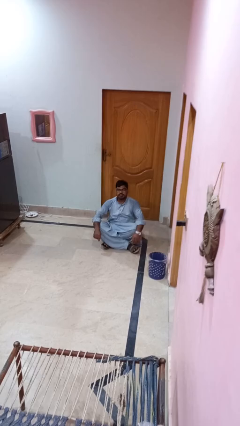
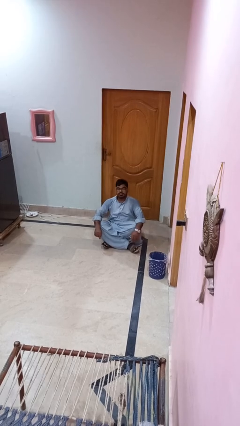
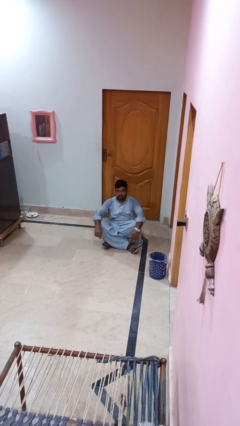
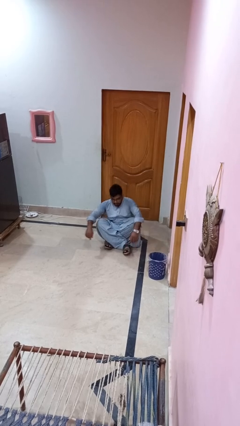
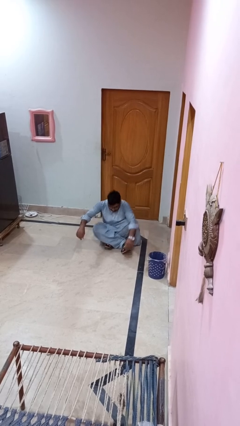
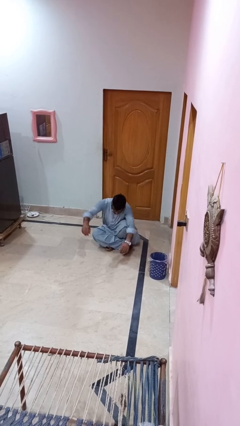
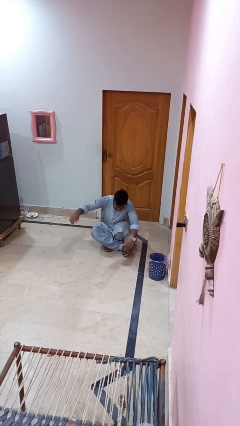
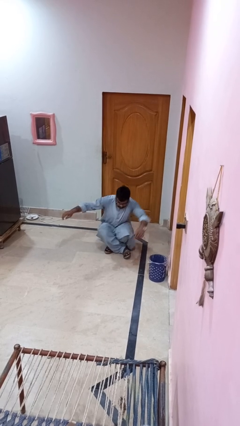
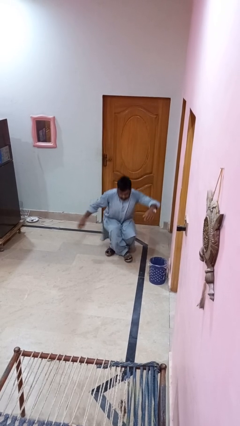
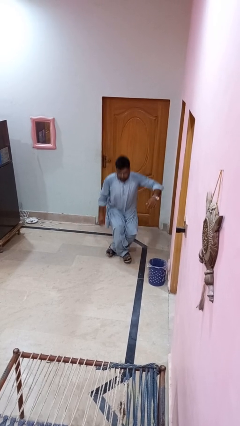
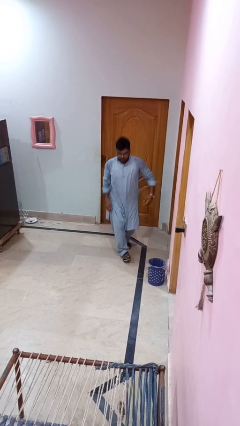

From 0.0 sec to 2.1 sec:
person stands up from floor

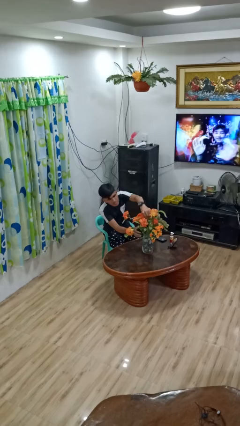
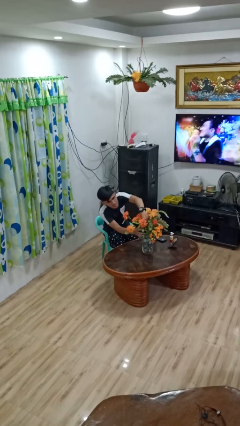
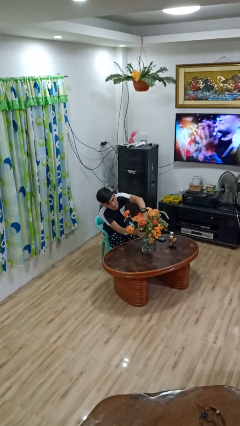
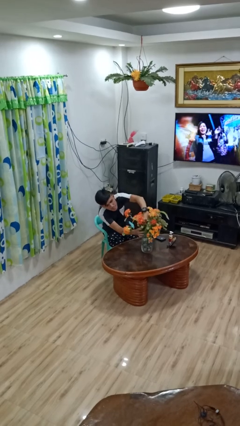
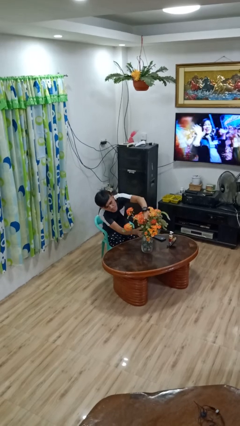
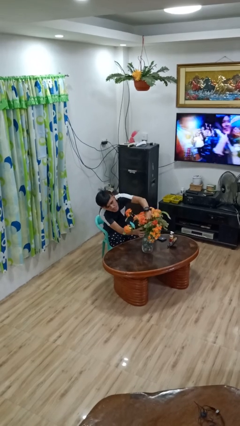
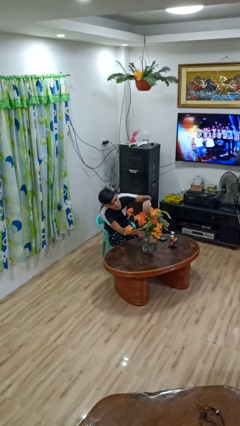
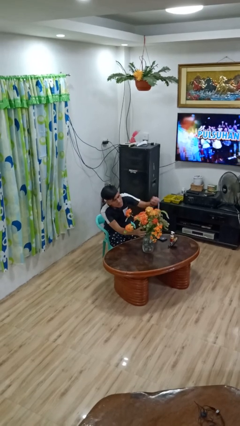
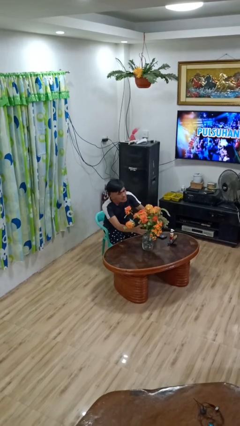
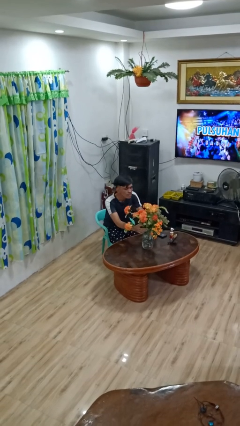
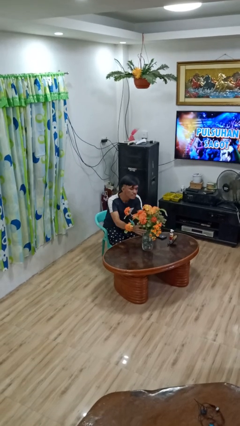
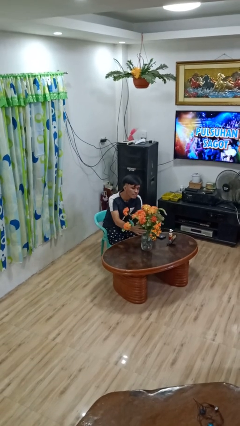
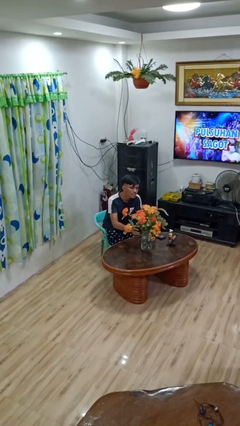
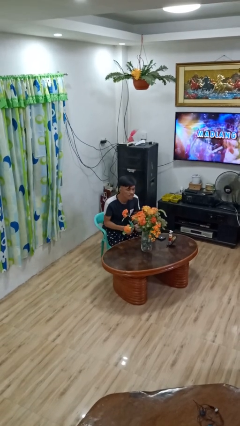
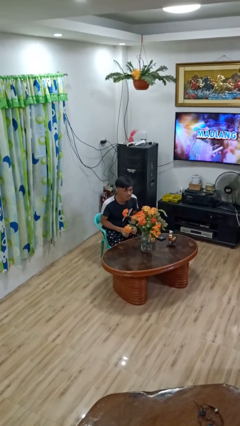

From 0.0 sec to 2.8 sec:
person arranges flowers in vase

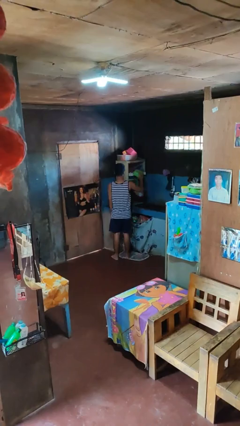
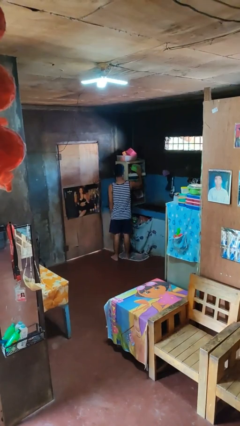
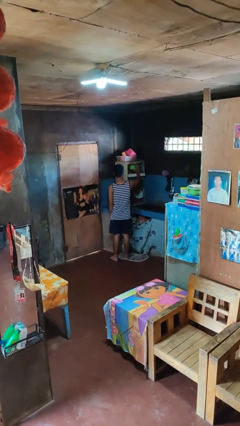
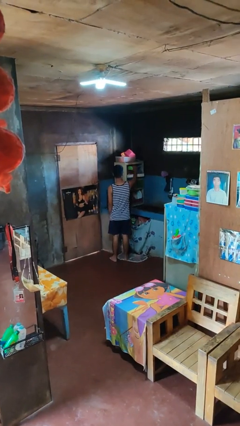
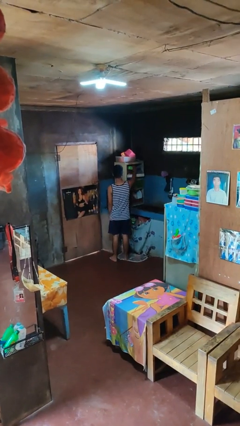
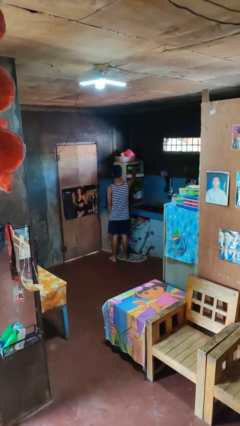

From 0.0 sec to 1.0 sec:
person puts object in cabinet

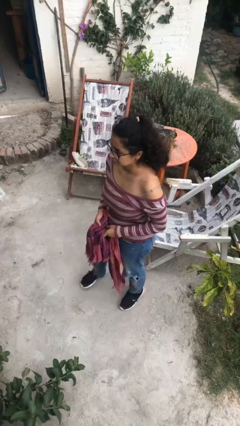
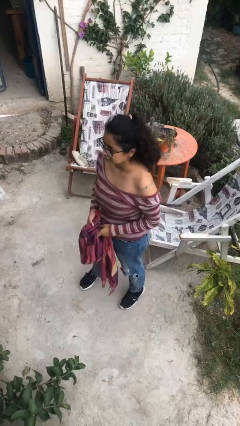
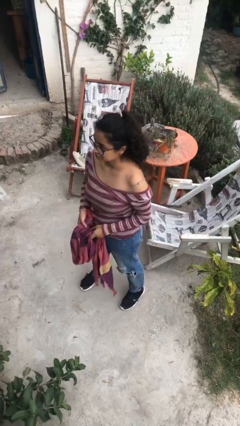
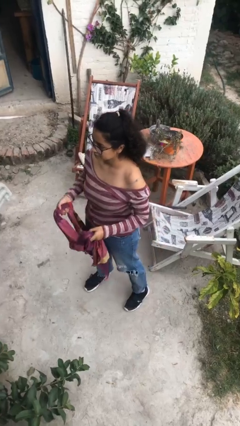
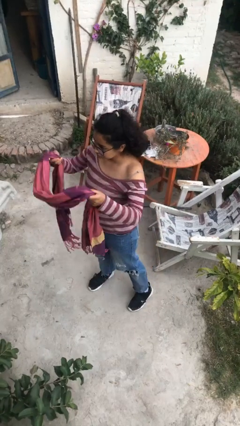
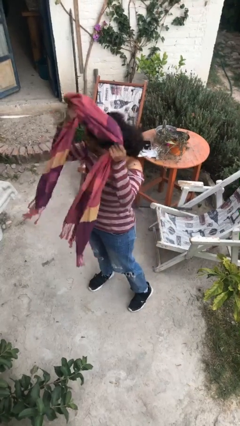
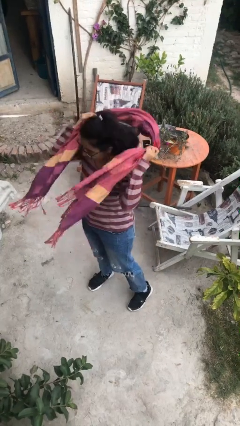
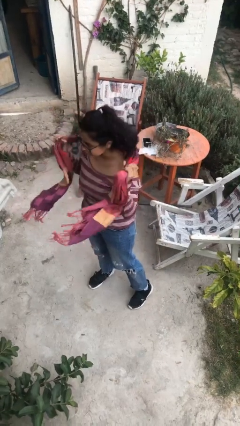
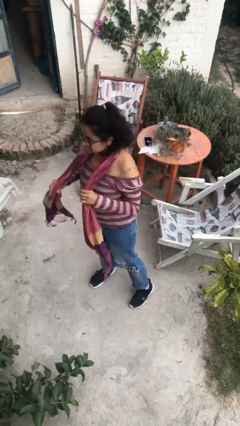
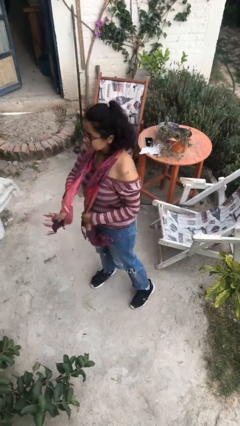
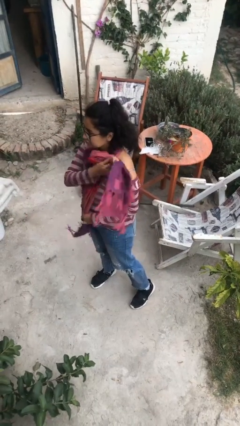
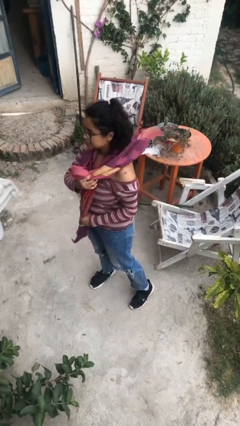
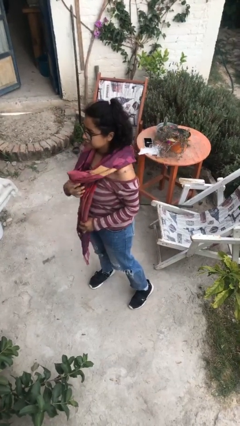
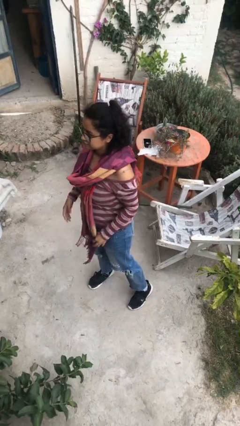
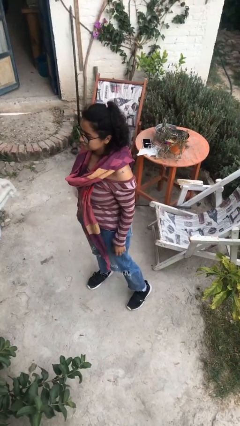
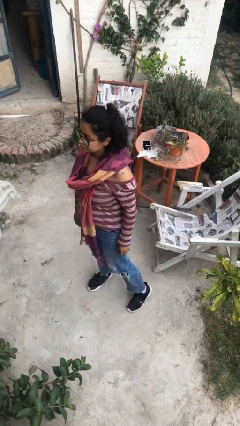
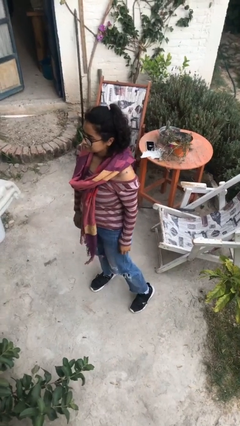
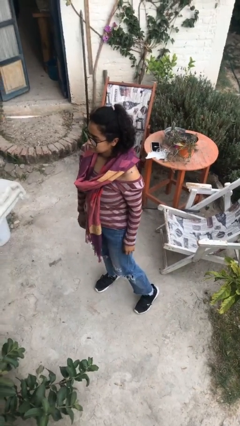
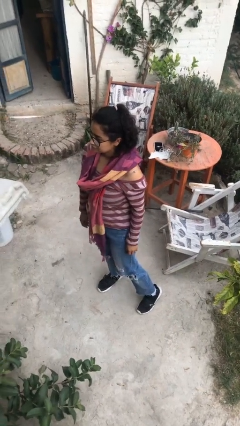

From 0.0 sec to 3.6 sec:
person puts on scarf

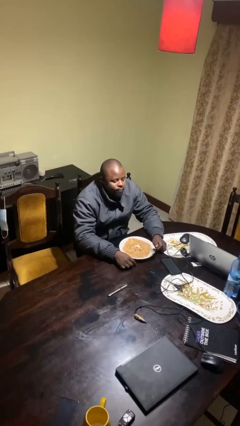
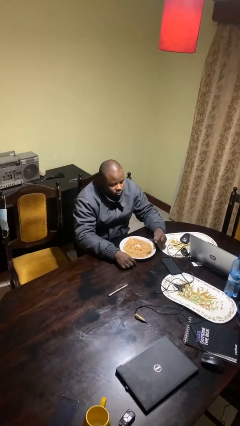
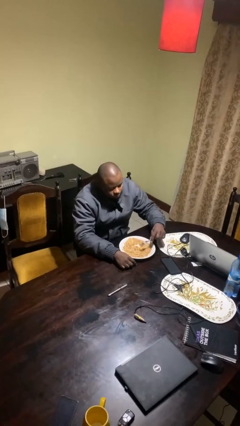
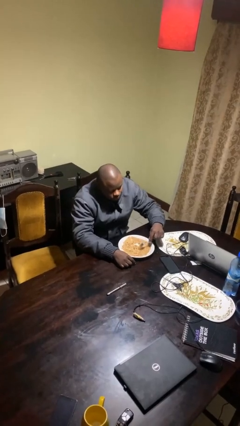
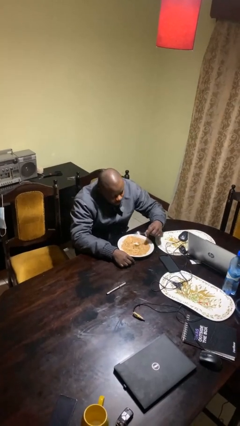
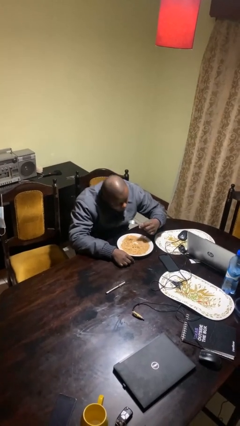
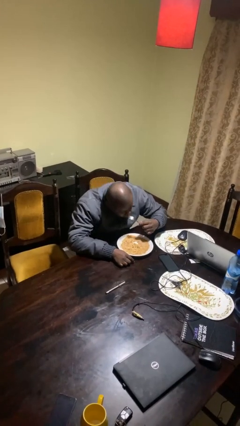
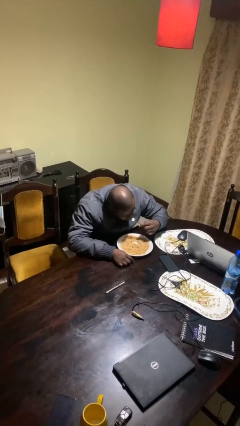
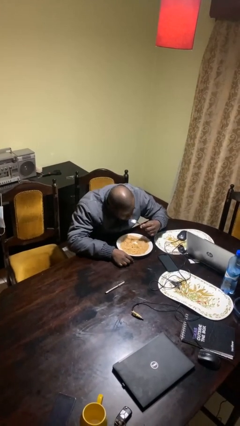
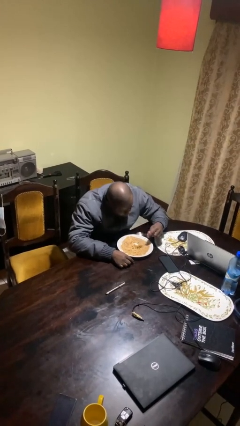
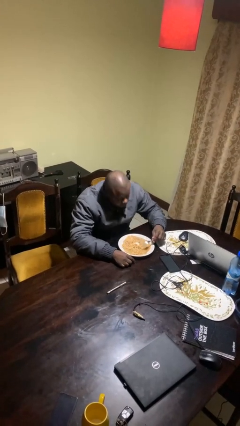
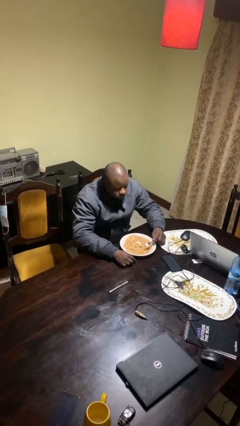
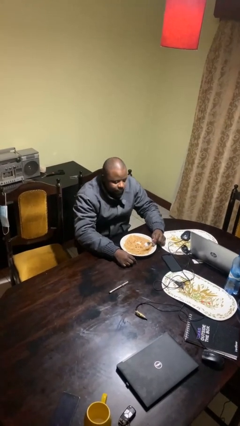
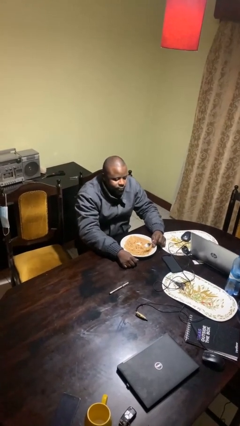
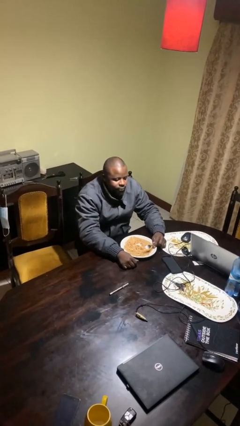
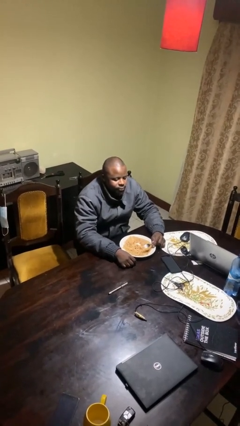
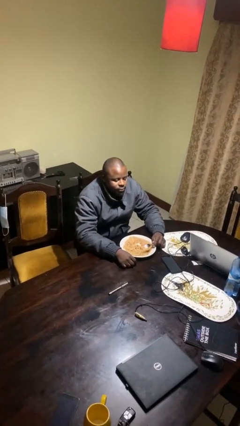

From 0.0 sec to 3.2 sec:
person eats with utensil

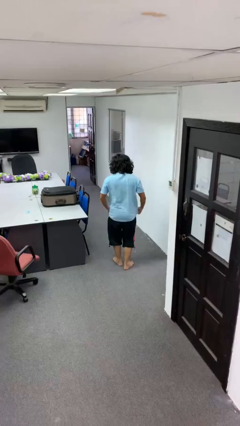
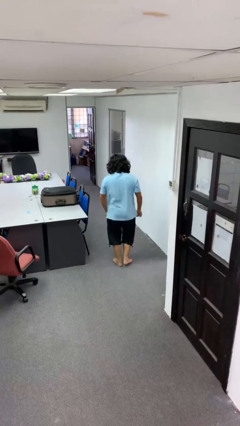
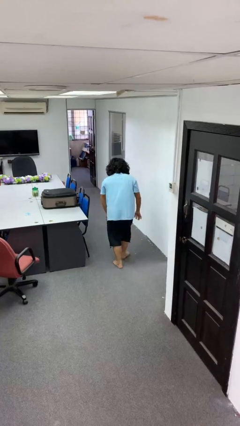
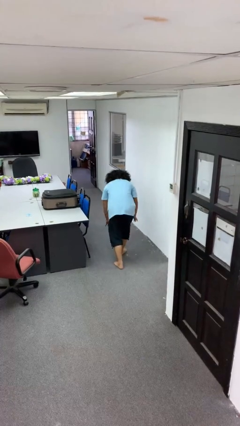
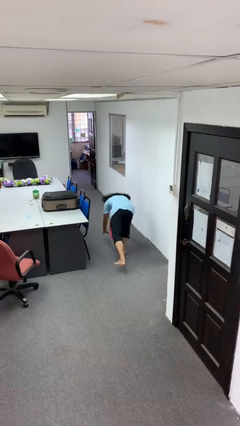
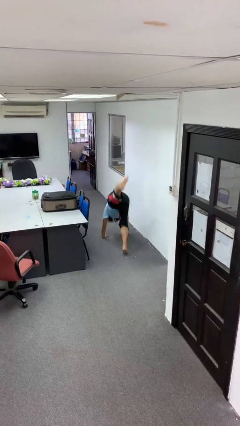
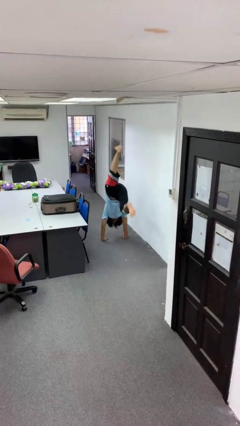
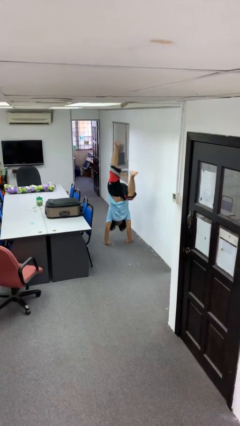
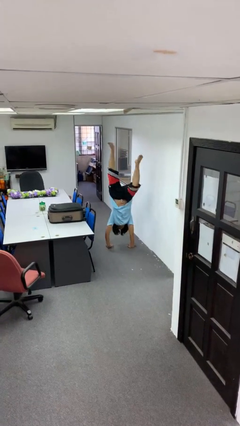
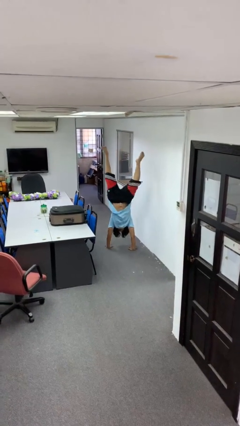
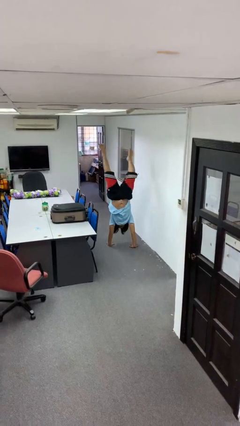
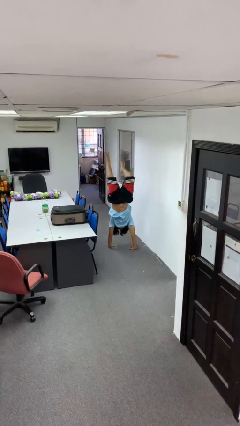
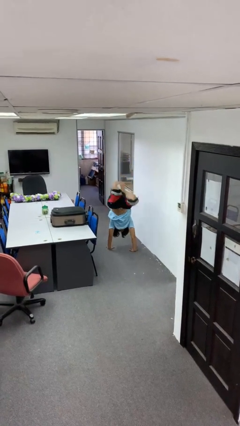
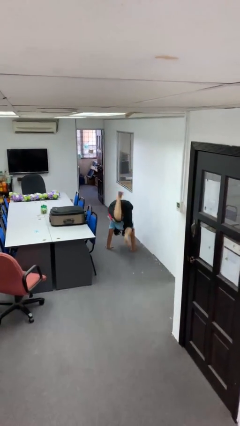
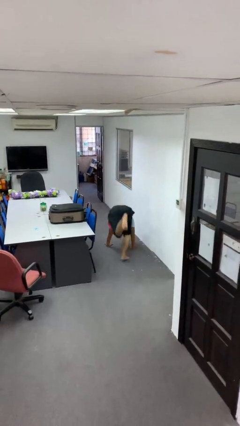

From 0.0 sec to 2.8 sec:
person handstand

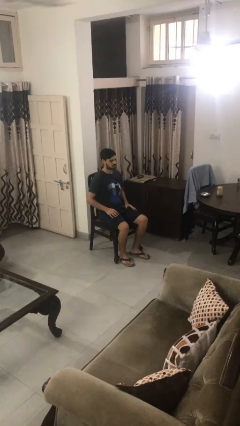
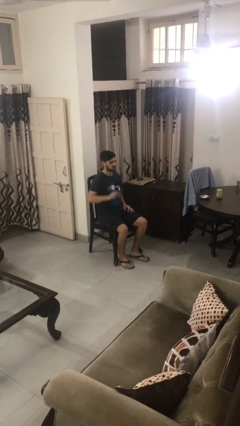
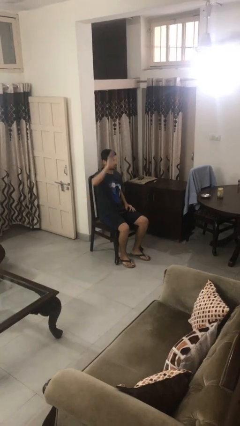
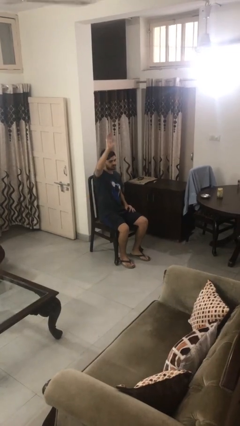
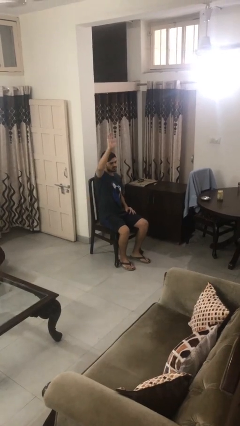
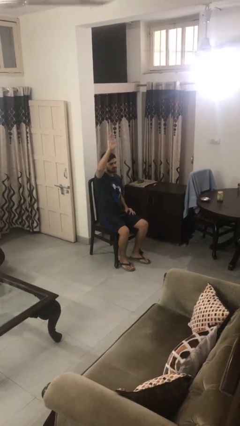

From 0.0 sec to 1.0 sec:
person gestures raise hand

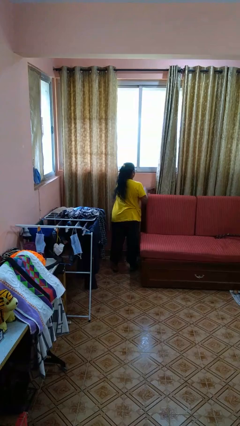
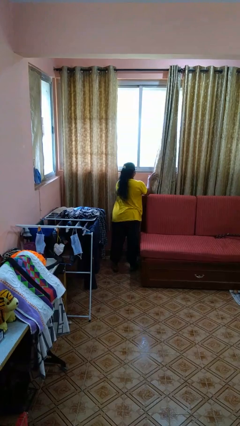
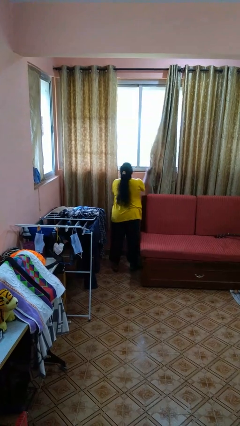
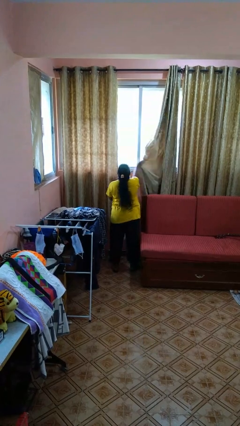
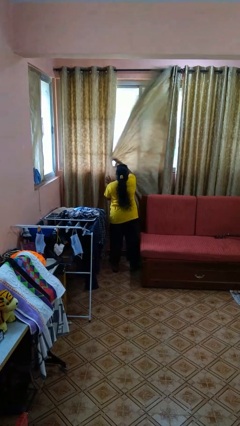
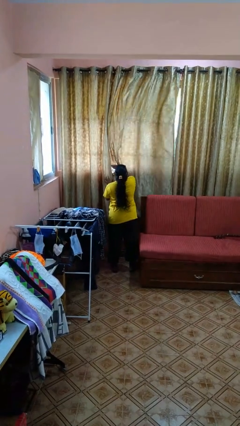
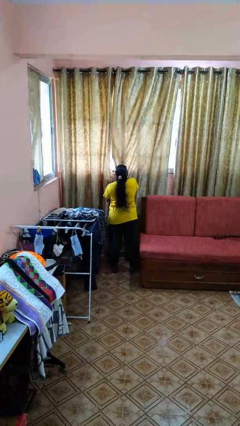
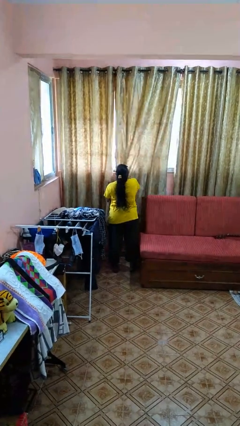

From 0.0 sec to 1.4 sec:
person closes curtains
